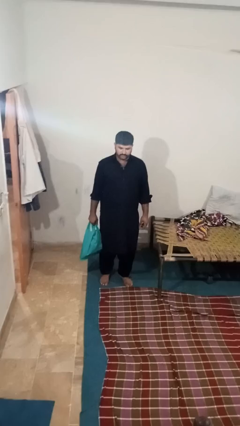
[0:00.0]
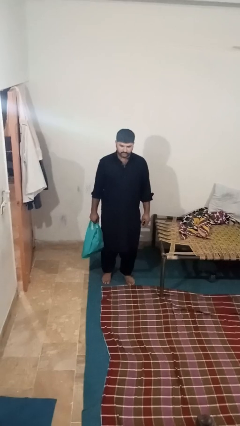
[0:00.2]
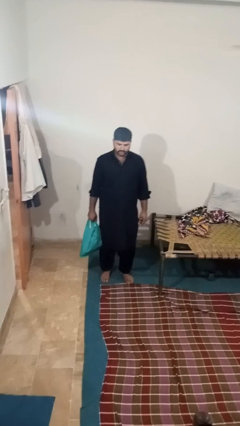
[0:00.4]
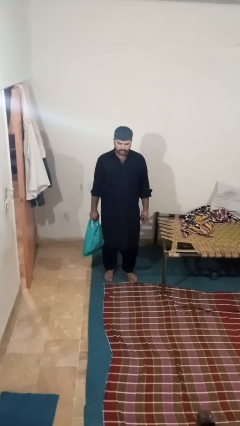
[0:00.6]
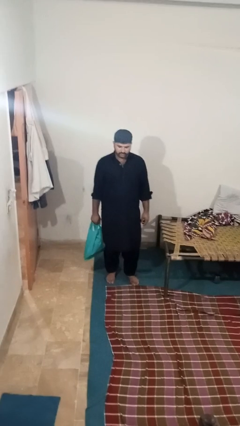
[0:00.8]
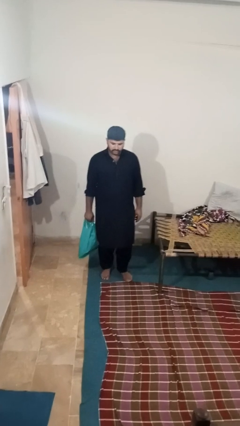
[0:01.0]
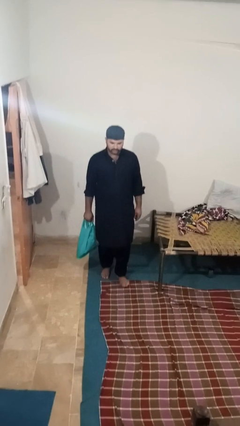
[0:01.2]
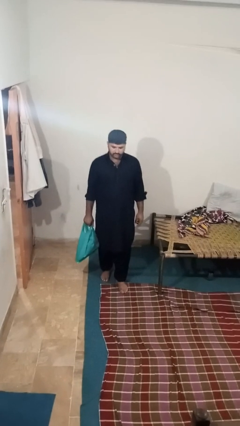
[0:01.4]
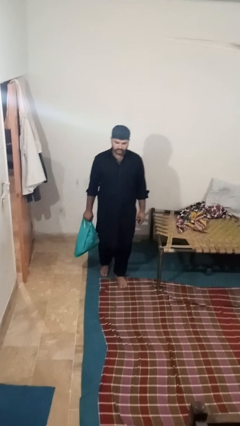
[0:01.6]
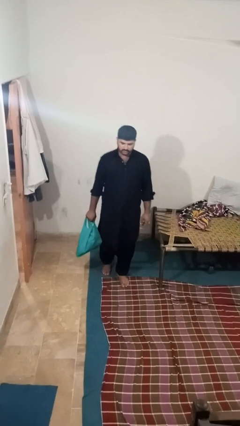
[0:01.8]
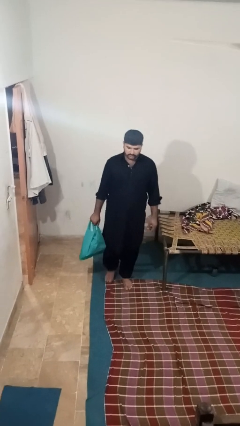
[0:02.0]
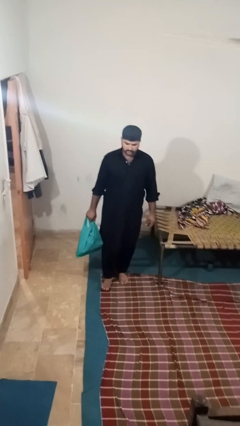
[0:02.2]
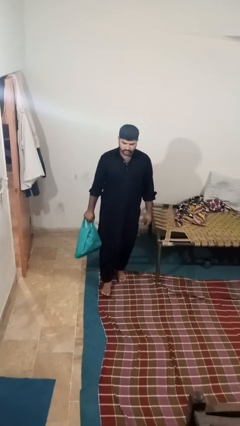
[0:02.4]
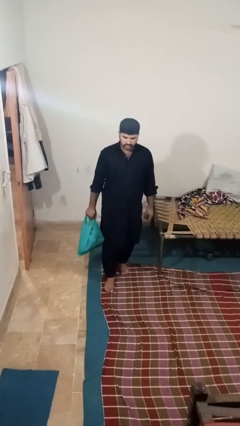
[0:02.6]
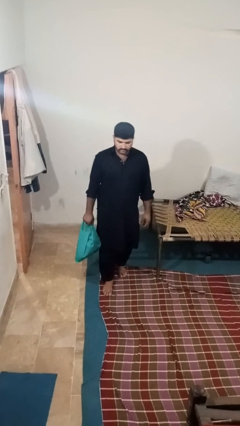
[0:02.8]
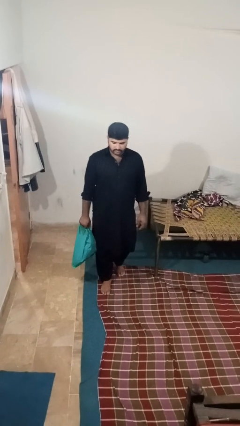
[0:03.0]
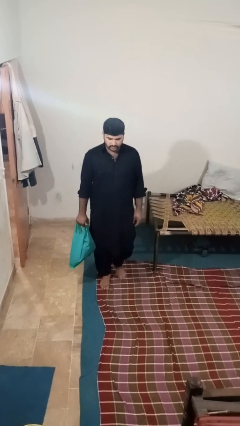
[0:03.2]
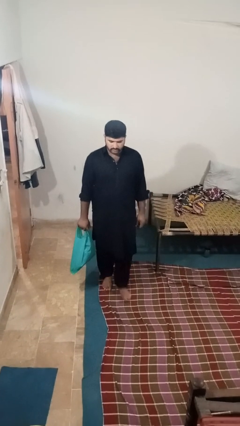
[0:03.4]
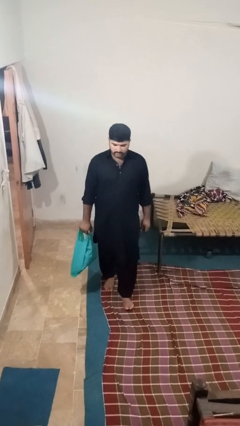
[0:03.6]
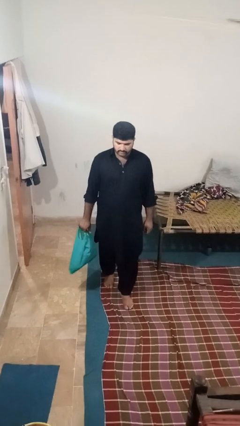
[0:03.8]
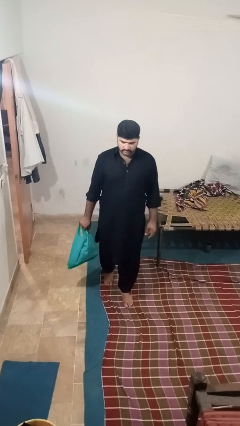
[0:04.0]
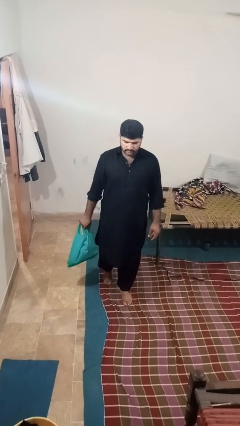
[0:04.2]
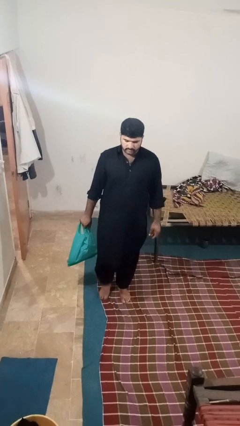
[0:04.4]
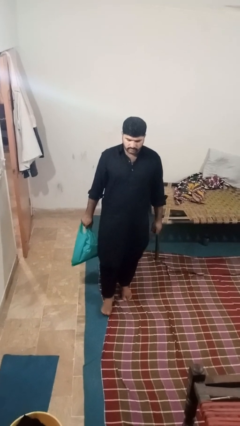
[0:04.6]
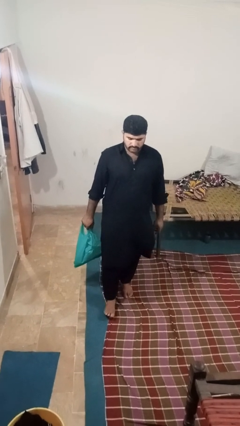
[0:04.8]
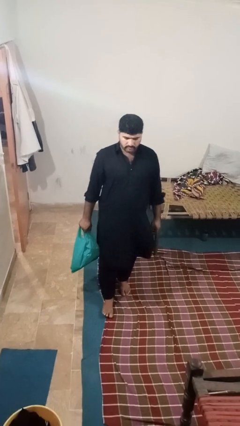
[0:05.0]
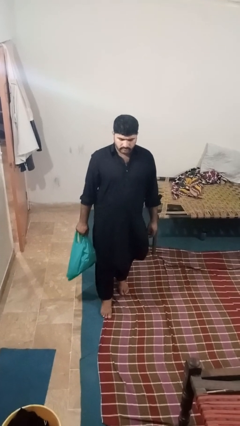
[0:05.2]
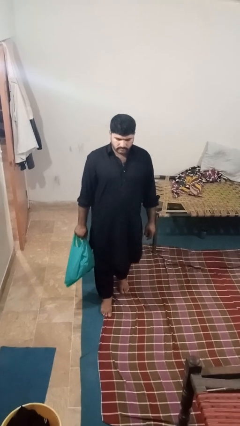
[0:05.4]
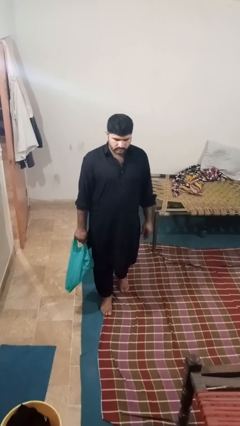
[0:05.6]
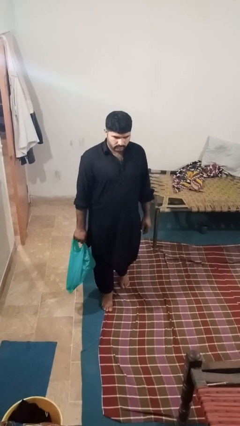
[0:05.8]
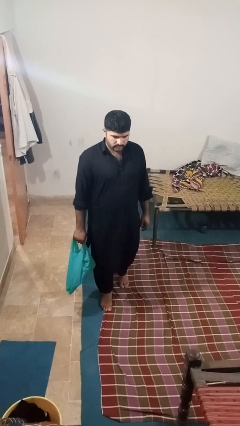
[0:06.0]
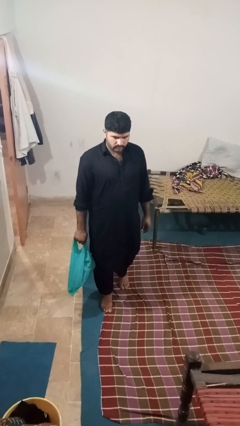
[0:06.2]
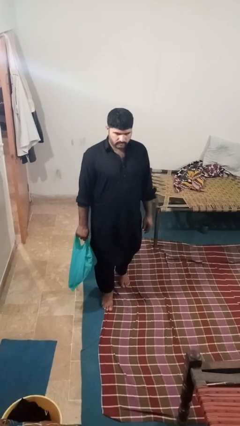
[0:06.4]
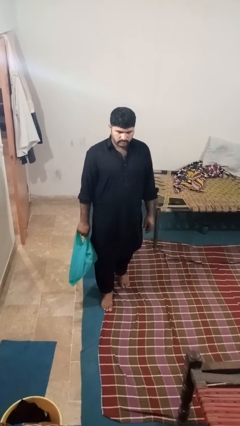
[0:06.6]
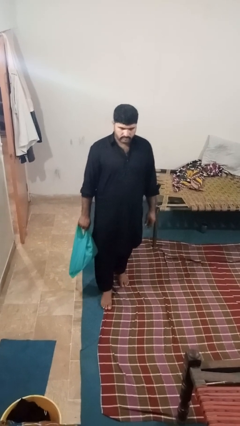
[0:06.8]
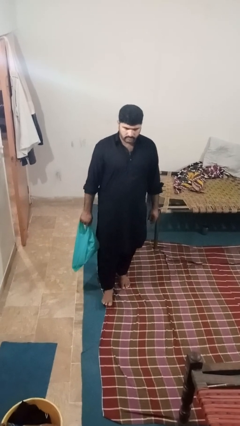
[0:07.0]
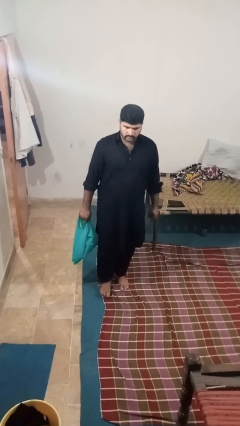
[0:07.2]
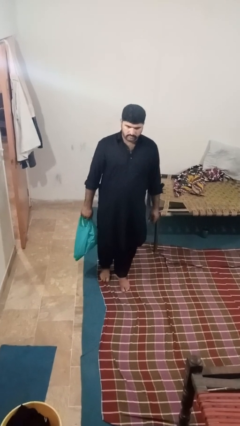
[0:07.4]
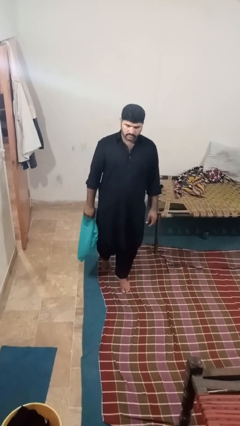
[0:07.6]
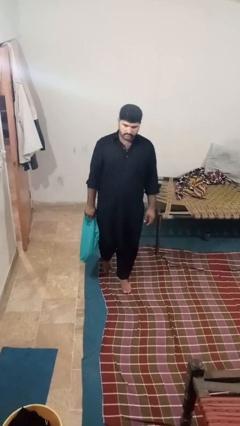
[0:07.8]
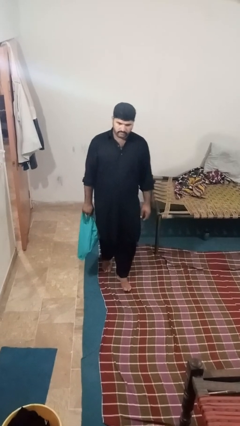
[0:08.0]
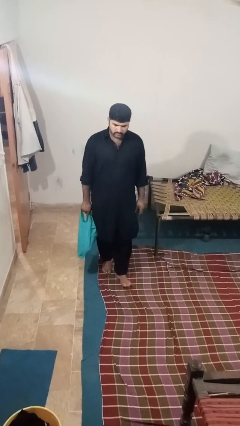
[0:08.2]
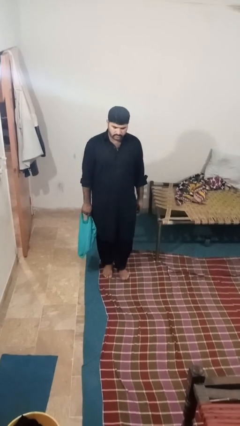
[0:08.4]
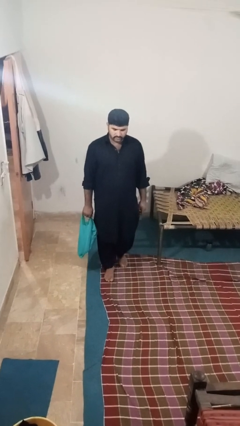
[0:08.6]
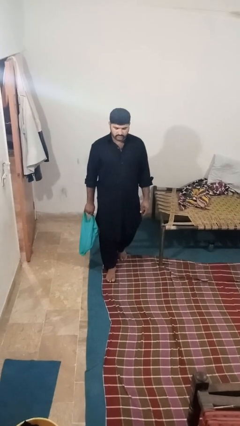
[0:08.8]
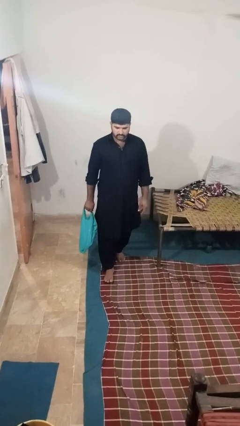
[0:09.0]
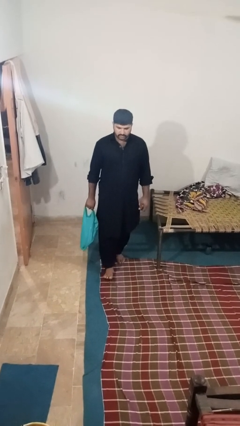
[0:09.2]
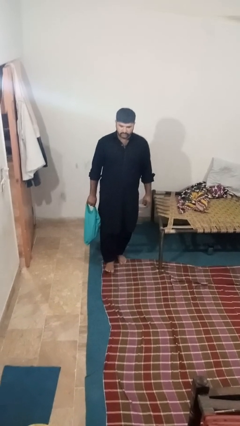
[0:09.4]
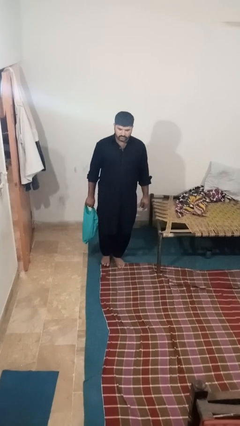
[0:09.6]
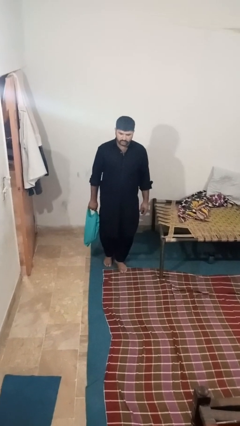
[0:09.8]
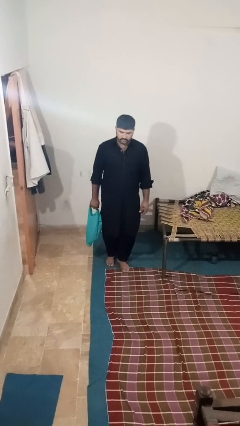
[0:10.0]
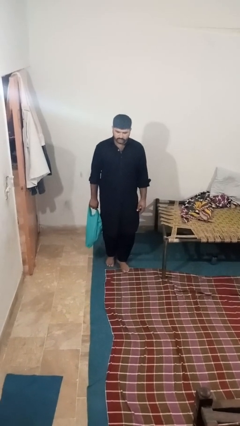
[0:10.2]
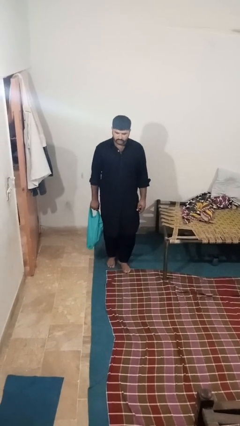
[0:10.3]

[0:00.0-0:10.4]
person carries groceries

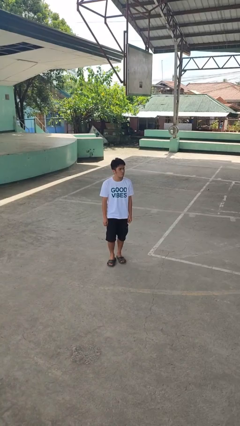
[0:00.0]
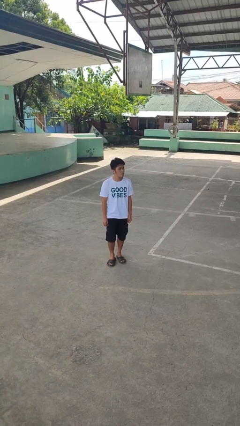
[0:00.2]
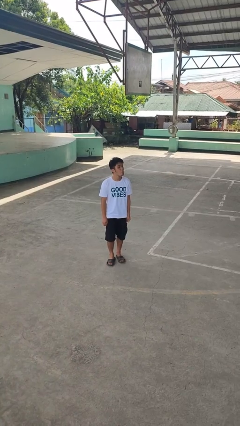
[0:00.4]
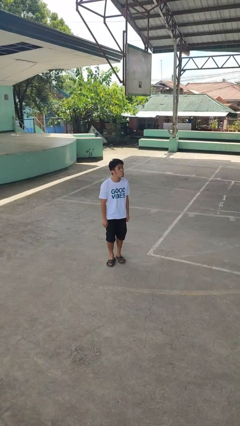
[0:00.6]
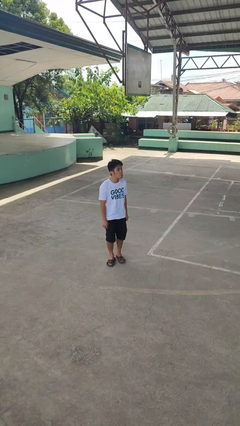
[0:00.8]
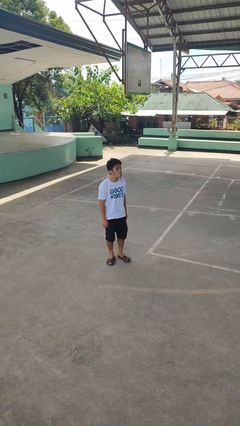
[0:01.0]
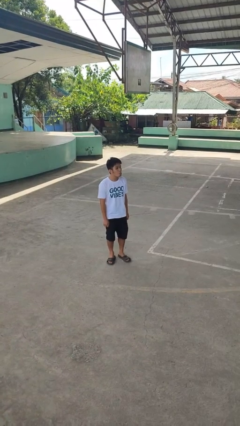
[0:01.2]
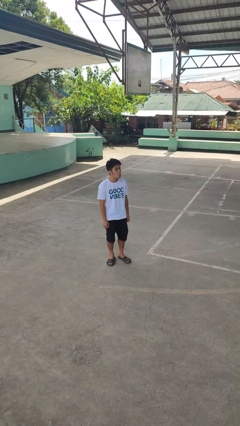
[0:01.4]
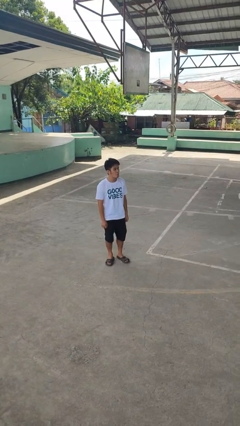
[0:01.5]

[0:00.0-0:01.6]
person sticks out tongue

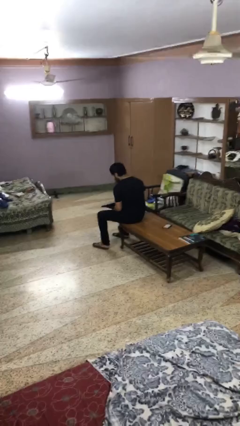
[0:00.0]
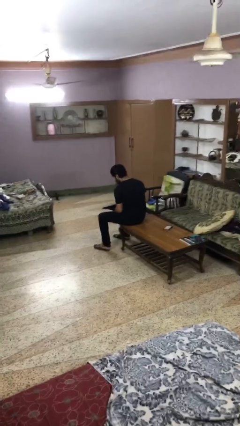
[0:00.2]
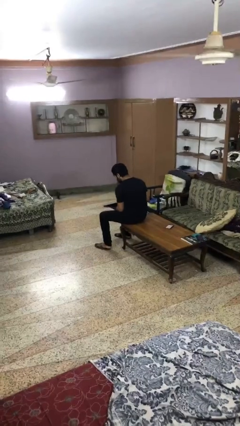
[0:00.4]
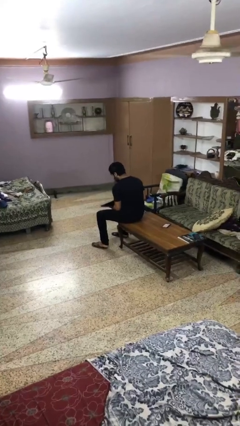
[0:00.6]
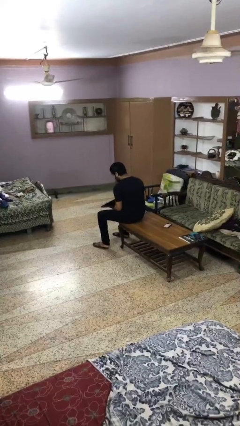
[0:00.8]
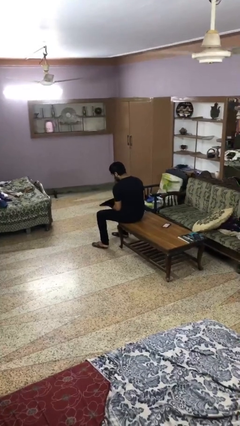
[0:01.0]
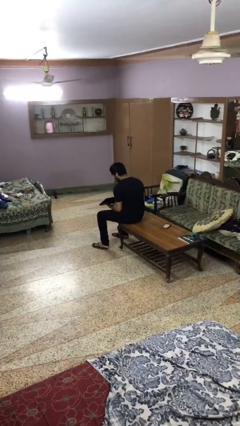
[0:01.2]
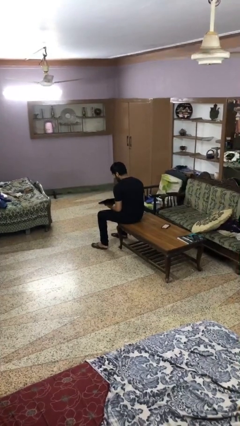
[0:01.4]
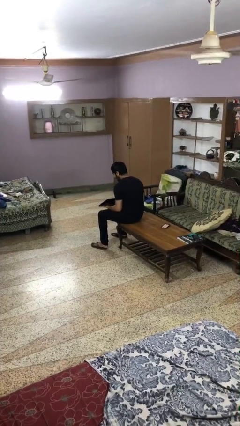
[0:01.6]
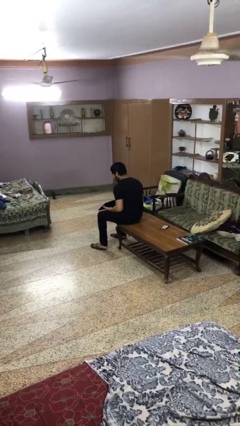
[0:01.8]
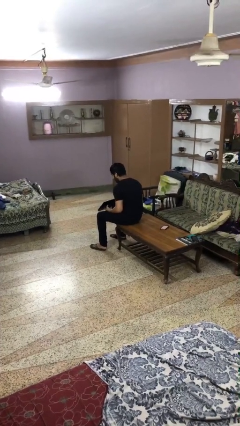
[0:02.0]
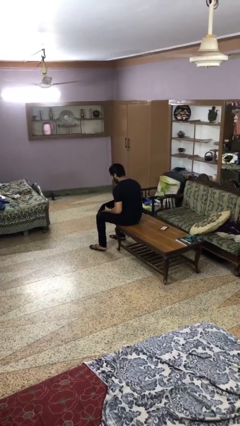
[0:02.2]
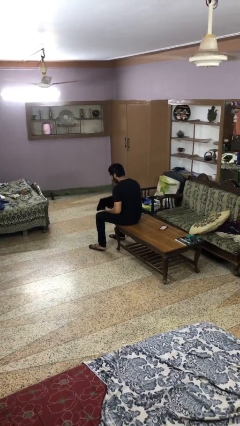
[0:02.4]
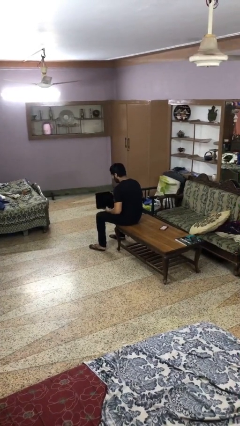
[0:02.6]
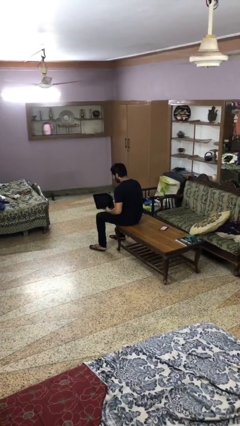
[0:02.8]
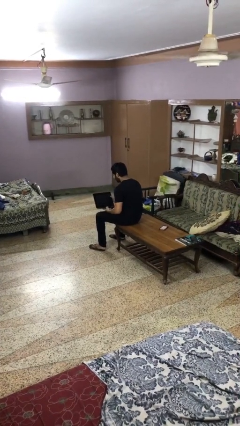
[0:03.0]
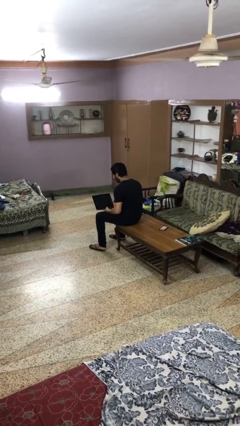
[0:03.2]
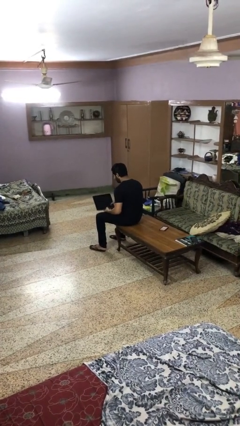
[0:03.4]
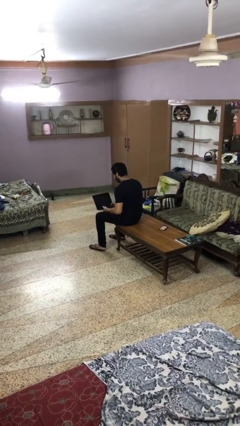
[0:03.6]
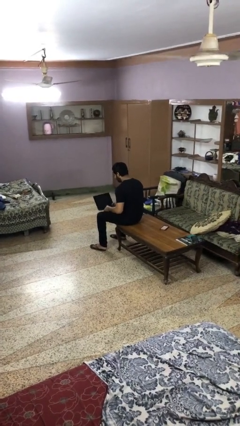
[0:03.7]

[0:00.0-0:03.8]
person opens laptop

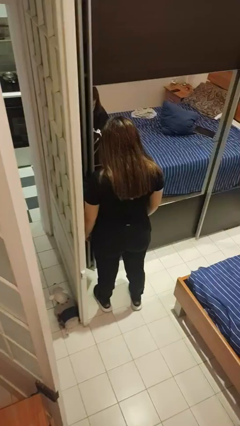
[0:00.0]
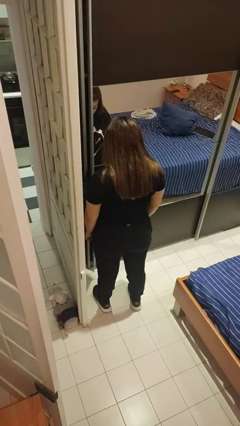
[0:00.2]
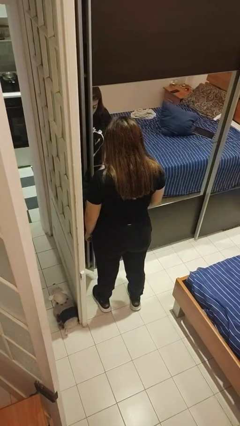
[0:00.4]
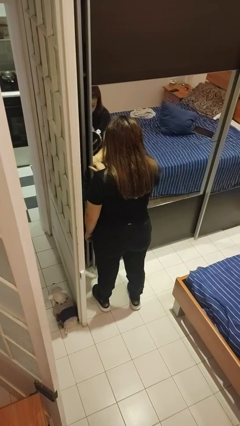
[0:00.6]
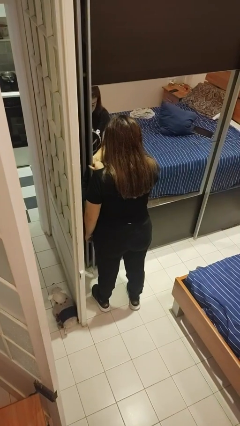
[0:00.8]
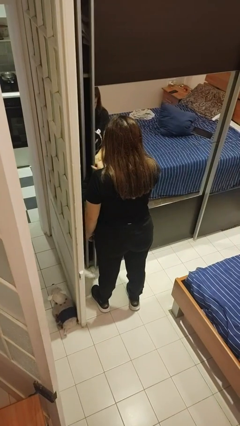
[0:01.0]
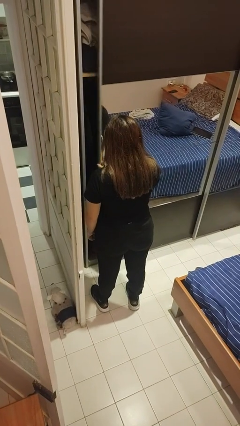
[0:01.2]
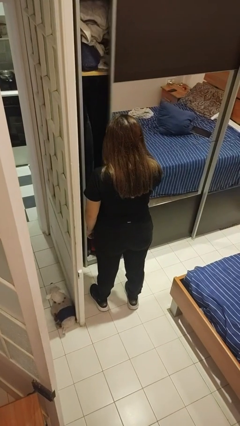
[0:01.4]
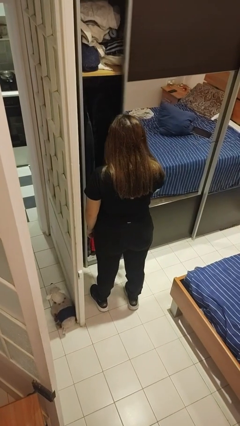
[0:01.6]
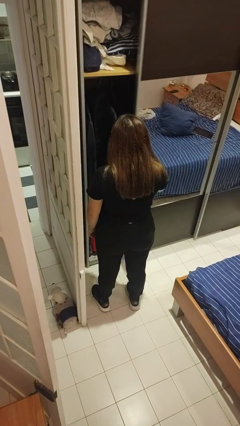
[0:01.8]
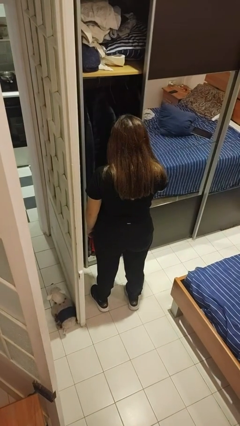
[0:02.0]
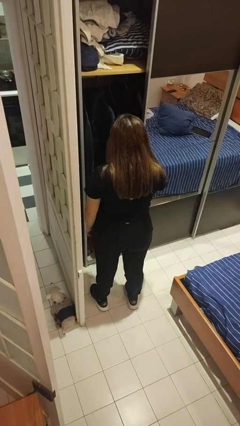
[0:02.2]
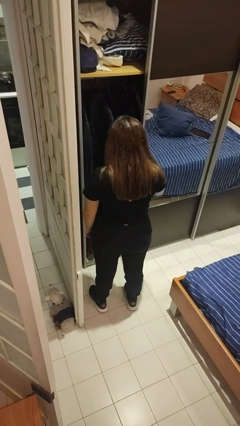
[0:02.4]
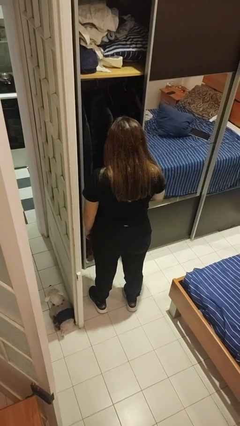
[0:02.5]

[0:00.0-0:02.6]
person opens dresser drawer
